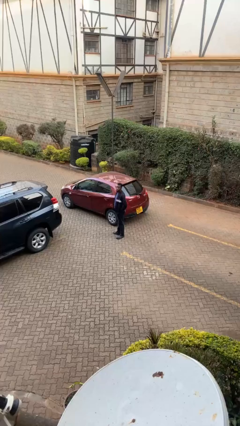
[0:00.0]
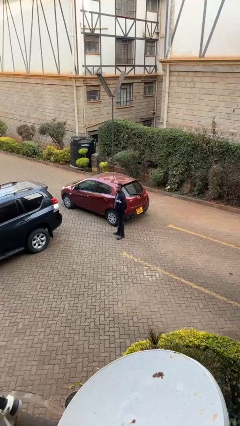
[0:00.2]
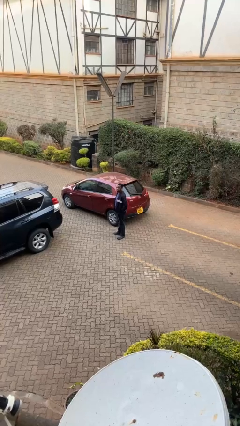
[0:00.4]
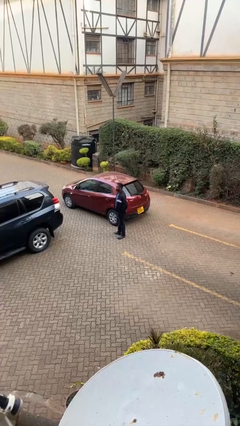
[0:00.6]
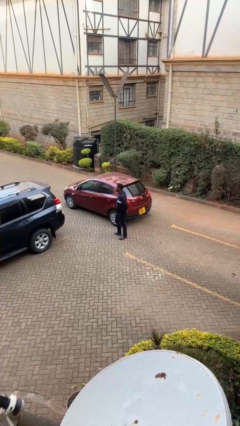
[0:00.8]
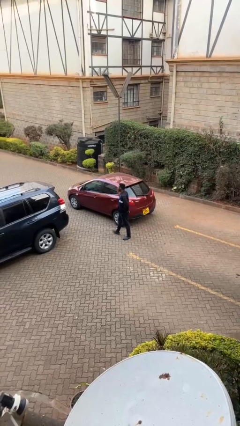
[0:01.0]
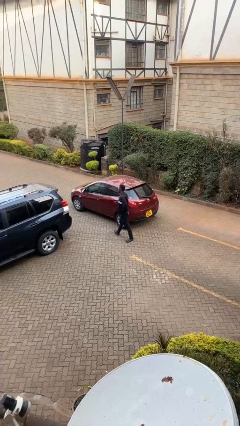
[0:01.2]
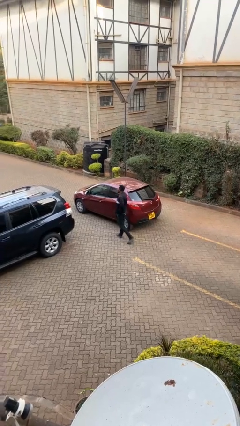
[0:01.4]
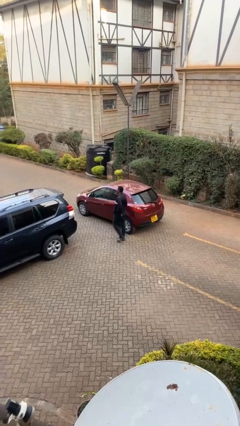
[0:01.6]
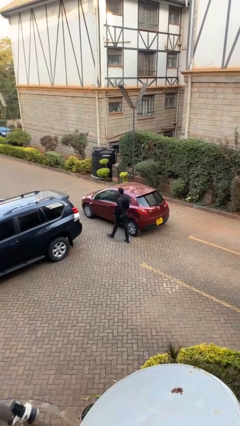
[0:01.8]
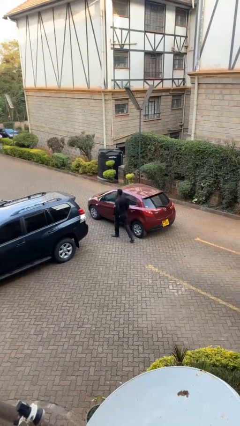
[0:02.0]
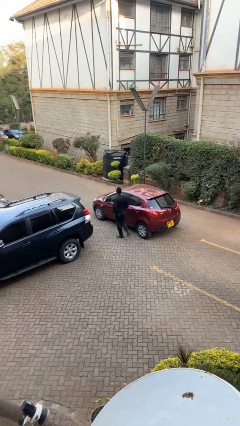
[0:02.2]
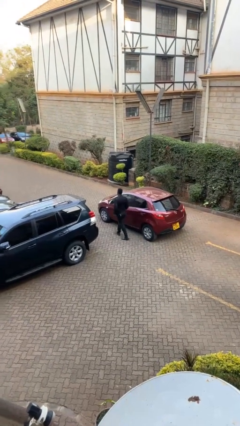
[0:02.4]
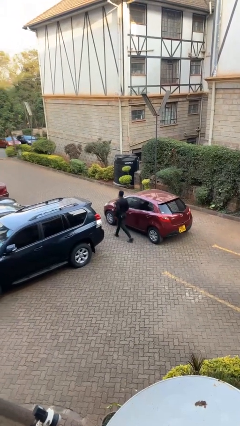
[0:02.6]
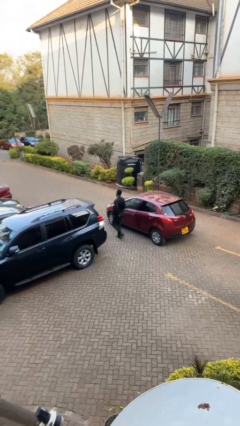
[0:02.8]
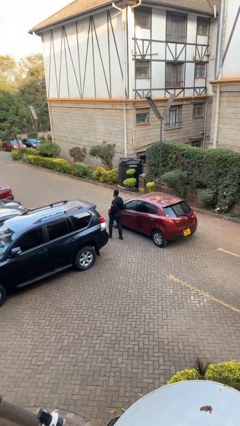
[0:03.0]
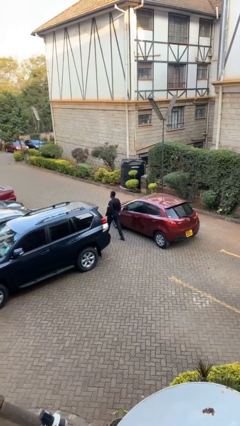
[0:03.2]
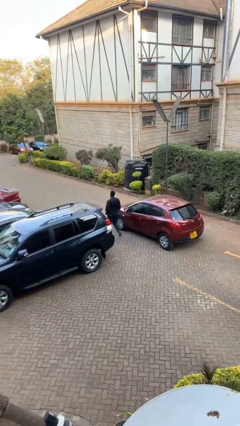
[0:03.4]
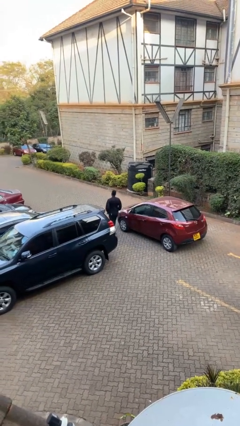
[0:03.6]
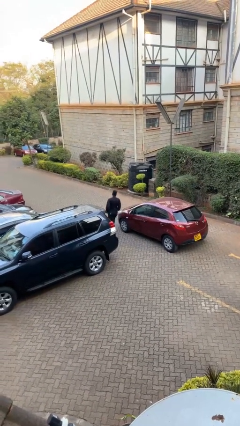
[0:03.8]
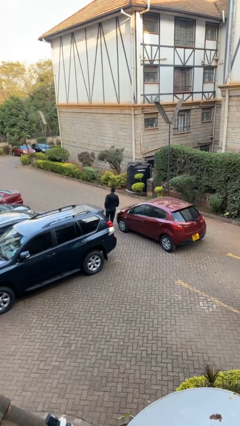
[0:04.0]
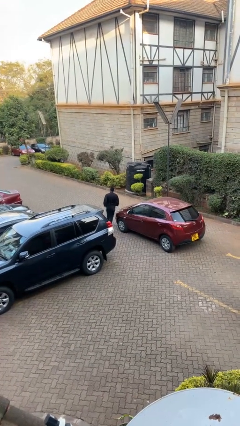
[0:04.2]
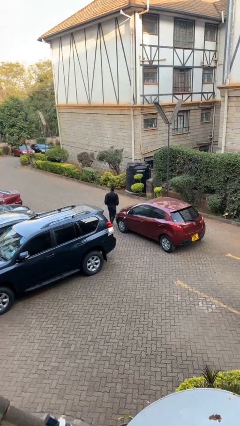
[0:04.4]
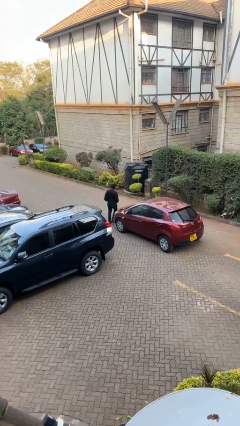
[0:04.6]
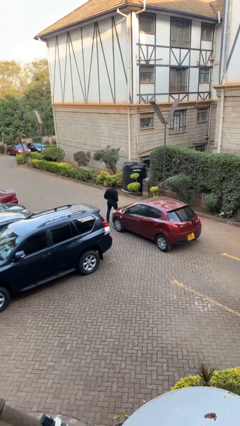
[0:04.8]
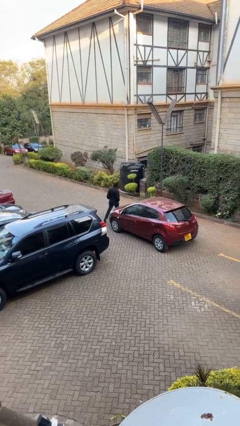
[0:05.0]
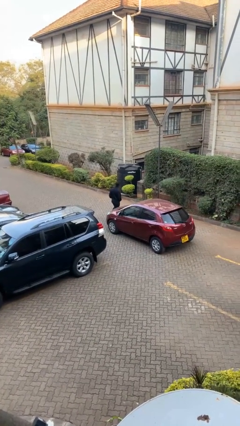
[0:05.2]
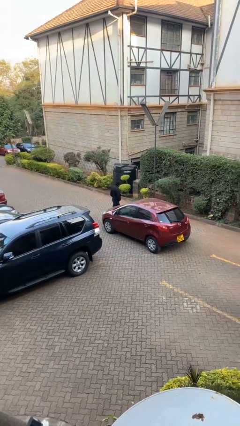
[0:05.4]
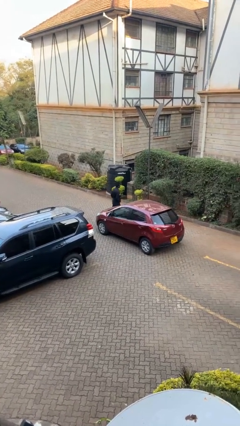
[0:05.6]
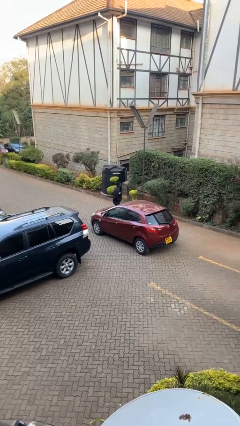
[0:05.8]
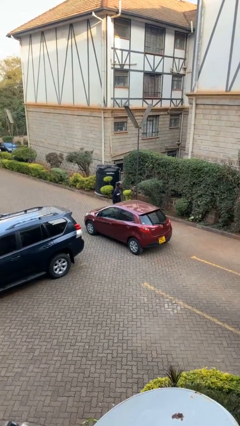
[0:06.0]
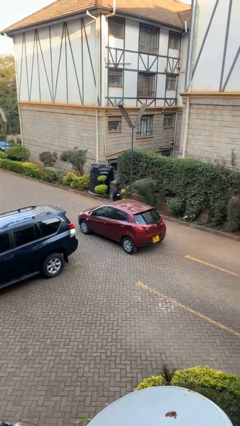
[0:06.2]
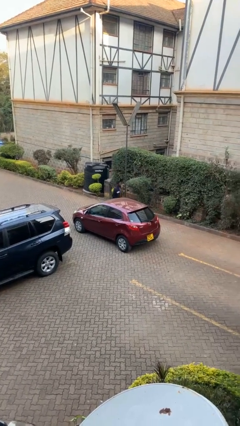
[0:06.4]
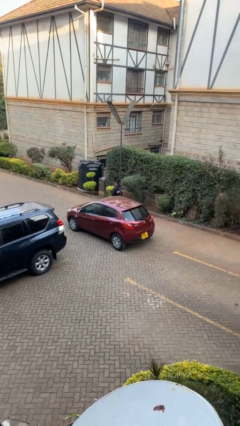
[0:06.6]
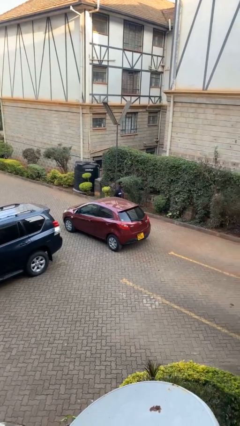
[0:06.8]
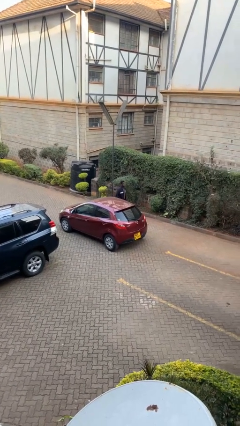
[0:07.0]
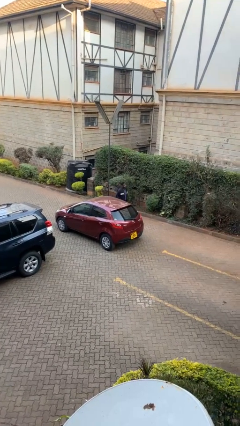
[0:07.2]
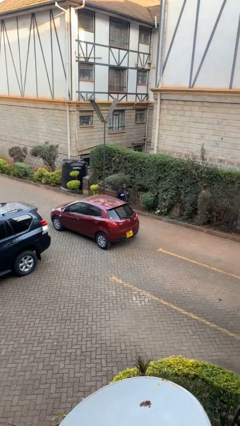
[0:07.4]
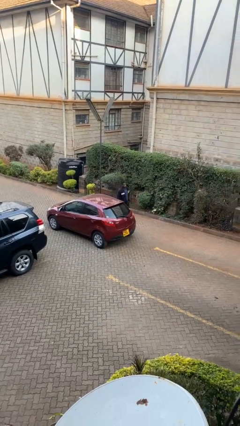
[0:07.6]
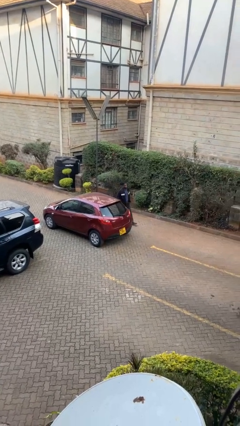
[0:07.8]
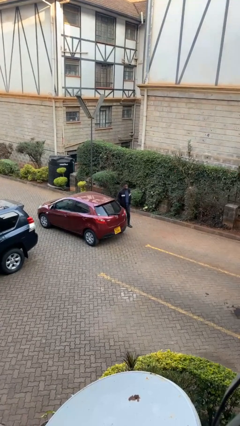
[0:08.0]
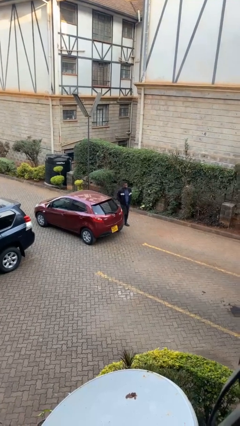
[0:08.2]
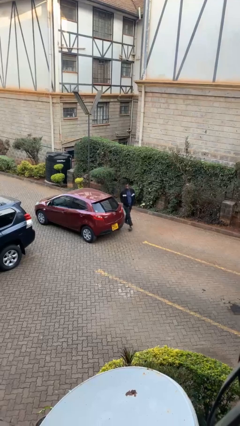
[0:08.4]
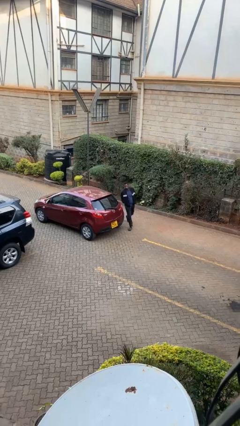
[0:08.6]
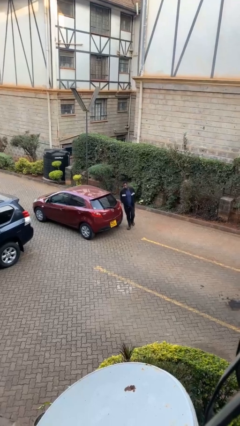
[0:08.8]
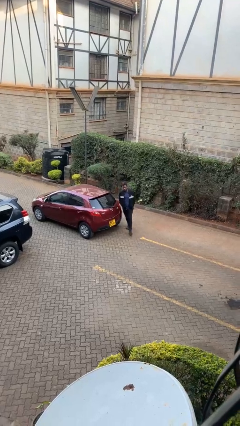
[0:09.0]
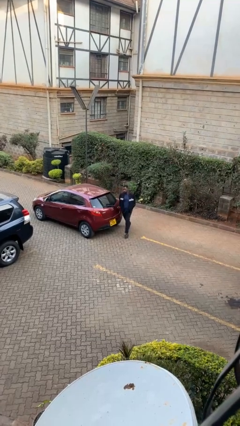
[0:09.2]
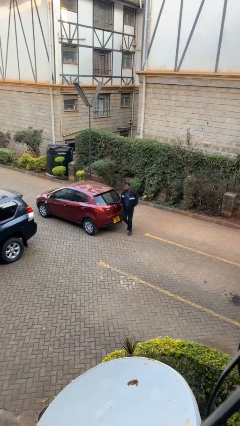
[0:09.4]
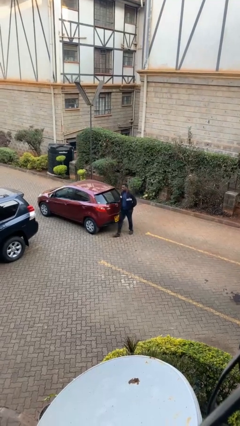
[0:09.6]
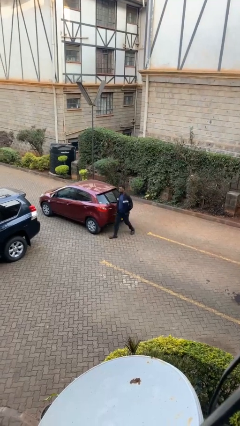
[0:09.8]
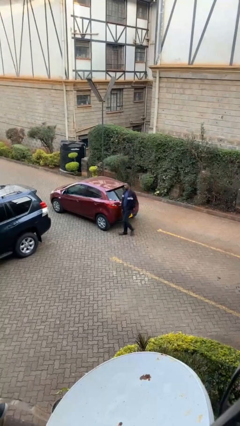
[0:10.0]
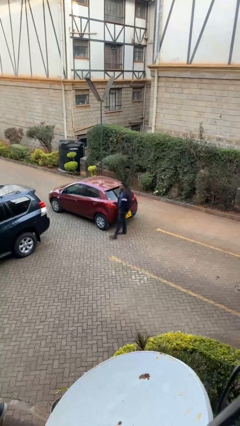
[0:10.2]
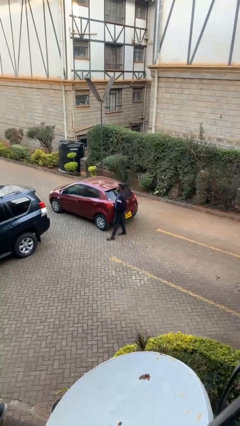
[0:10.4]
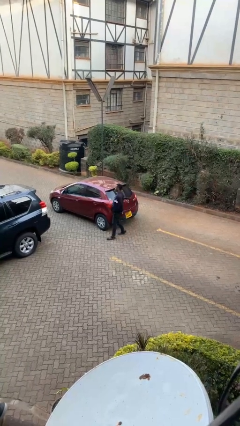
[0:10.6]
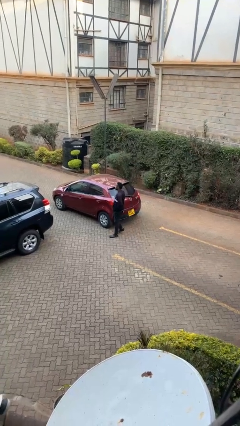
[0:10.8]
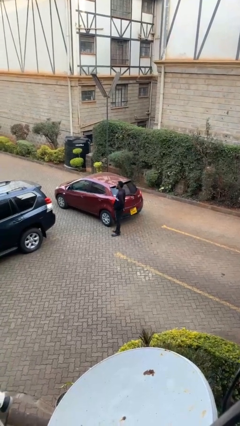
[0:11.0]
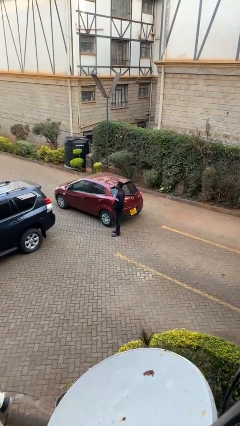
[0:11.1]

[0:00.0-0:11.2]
person walks around car

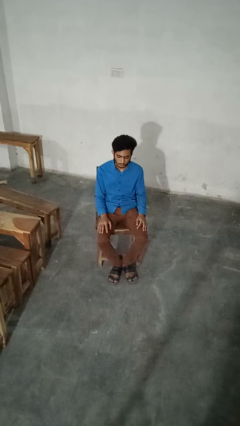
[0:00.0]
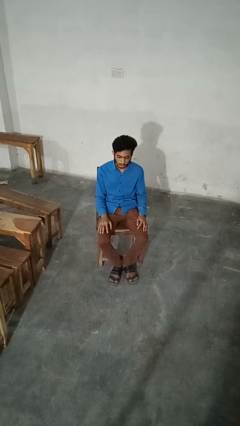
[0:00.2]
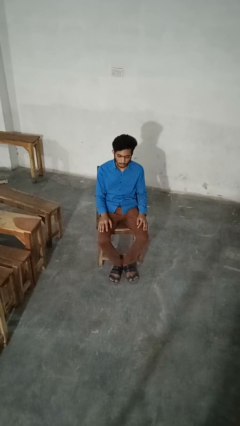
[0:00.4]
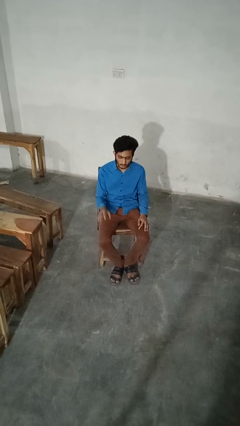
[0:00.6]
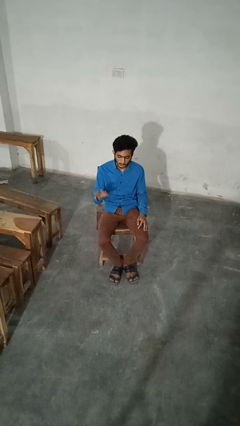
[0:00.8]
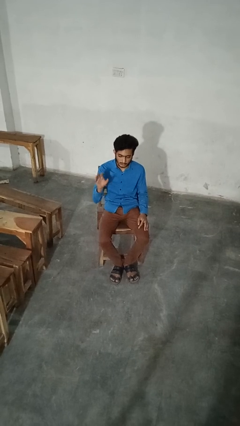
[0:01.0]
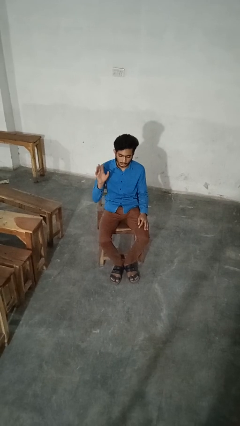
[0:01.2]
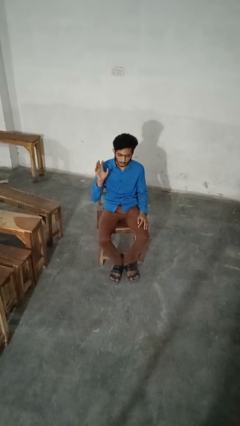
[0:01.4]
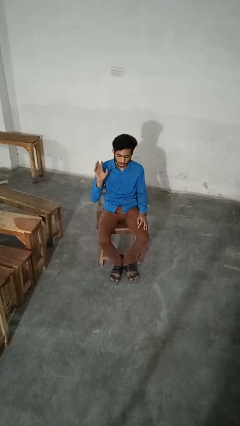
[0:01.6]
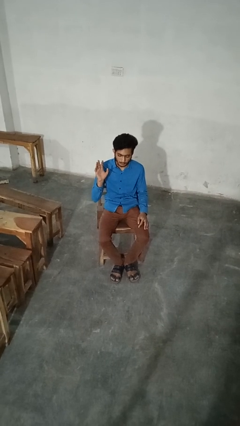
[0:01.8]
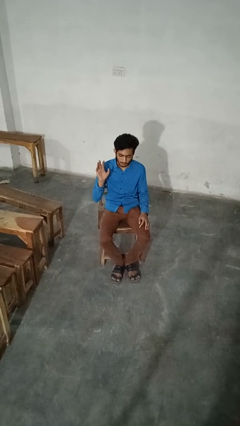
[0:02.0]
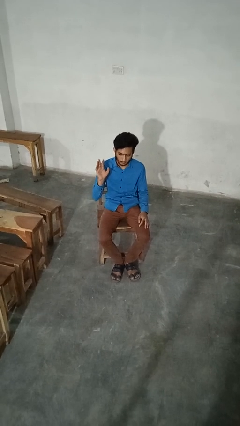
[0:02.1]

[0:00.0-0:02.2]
person gestures raise hand

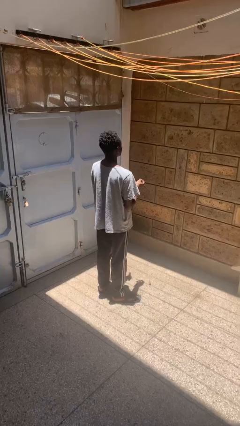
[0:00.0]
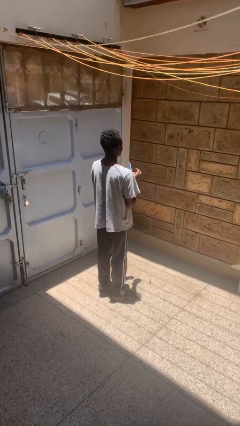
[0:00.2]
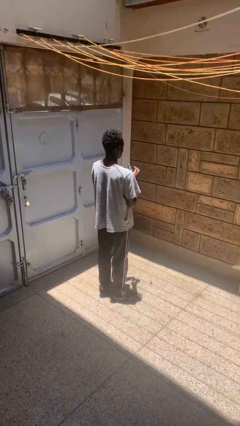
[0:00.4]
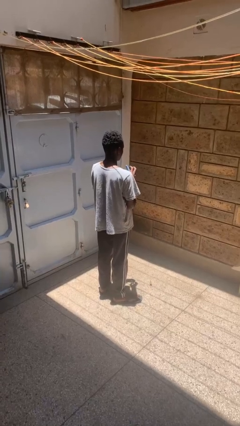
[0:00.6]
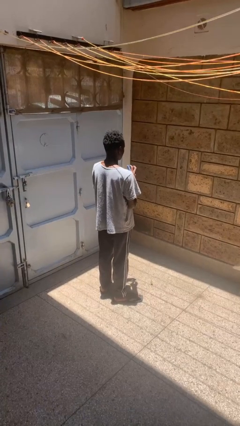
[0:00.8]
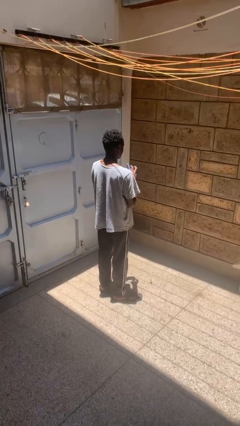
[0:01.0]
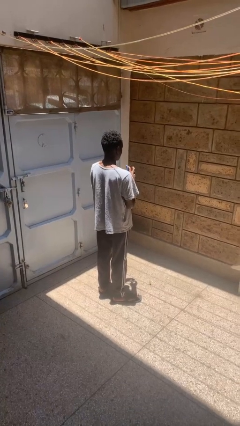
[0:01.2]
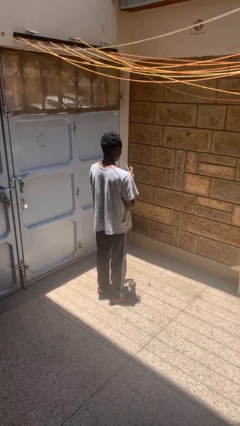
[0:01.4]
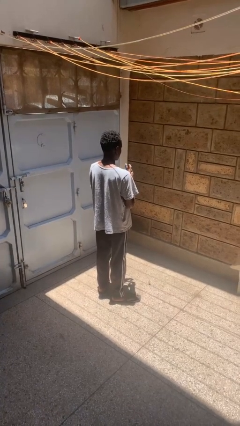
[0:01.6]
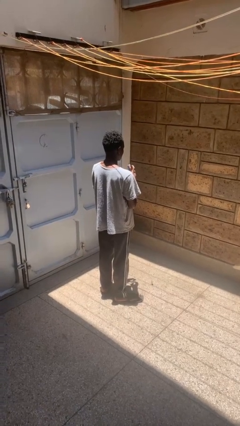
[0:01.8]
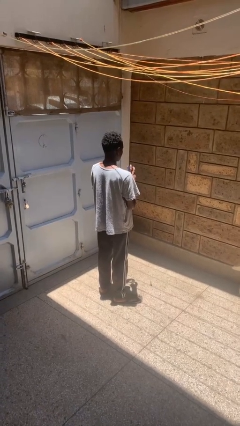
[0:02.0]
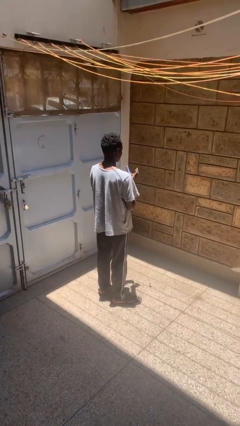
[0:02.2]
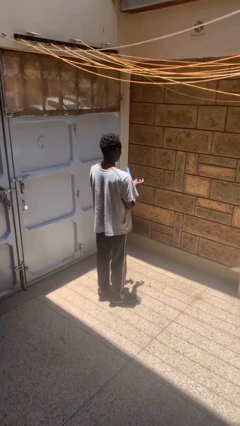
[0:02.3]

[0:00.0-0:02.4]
person files fingernails

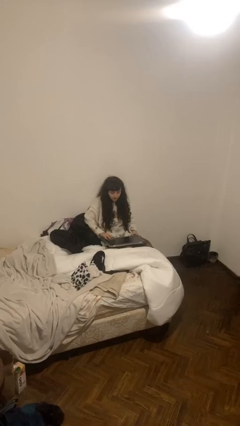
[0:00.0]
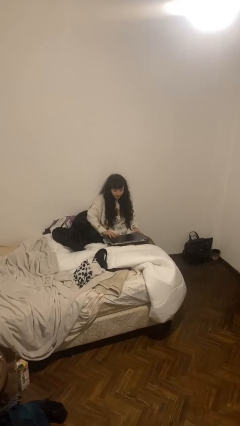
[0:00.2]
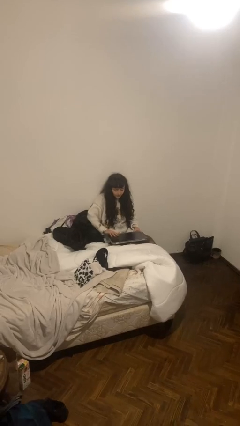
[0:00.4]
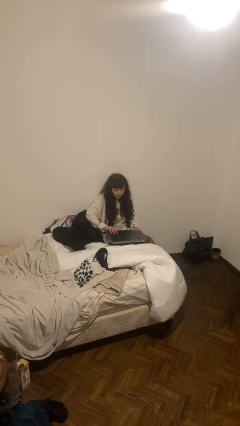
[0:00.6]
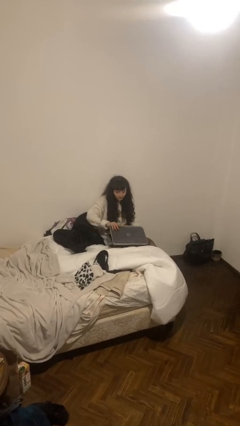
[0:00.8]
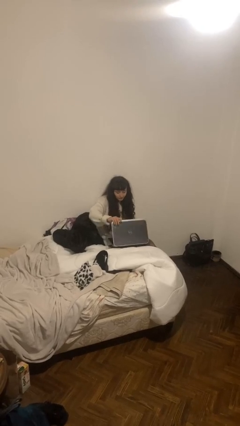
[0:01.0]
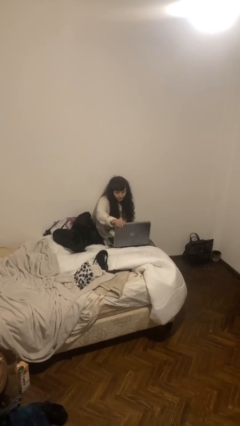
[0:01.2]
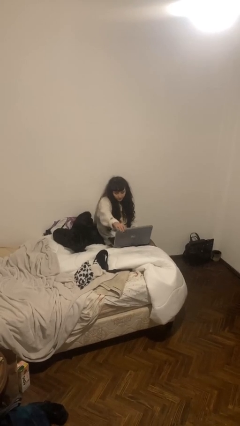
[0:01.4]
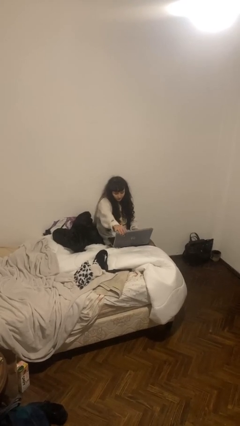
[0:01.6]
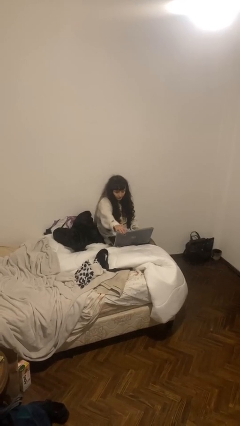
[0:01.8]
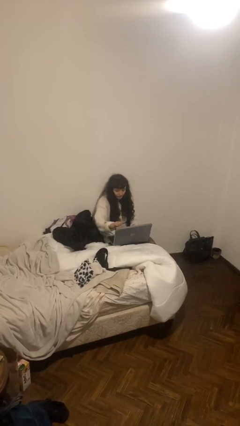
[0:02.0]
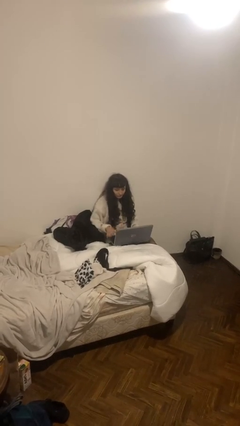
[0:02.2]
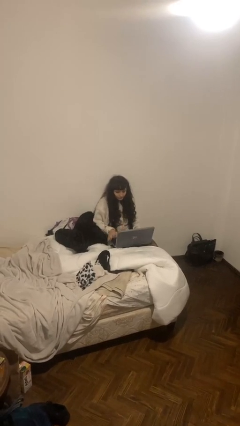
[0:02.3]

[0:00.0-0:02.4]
person opens laptop
